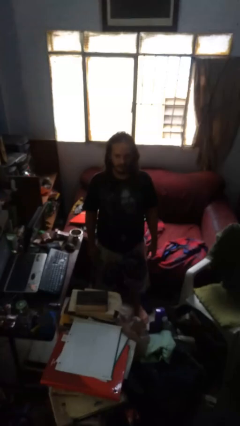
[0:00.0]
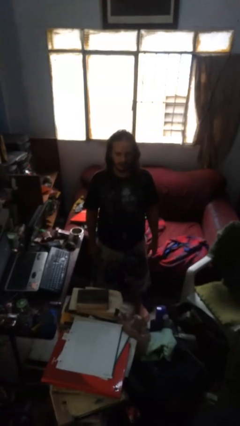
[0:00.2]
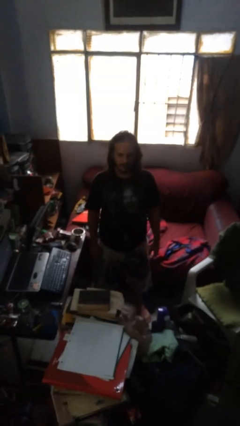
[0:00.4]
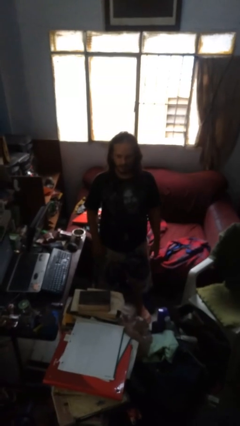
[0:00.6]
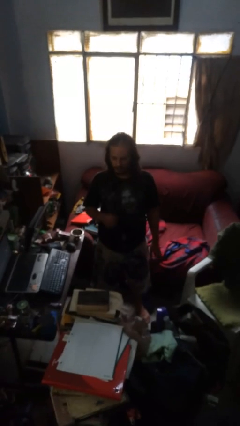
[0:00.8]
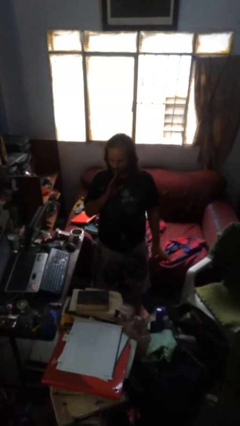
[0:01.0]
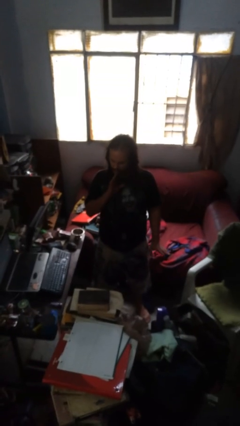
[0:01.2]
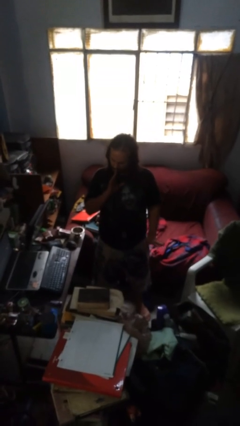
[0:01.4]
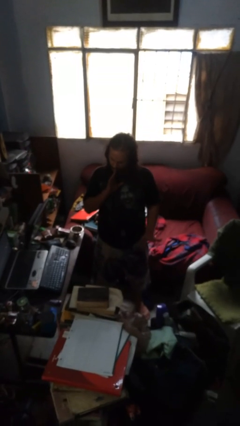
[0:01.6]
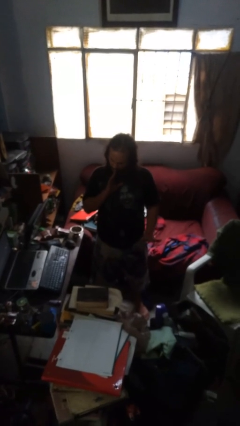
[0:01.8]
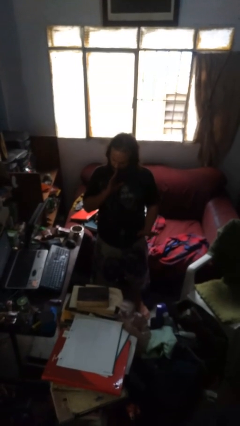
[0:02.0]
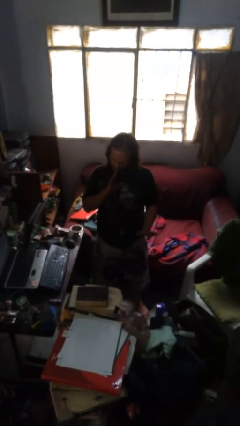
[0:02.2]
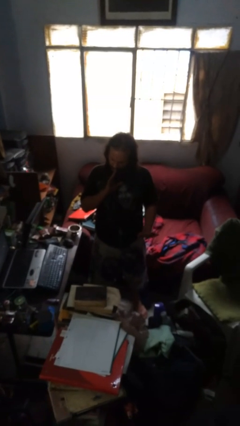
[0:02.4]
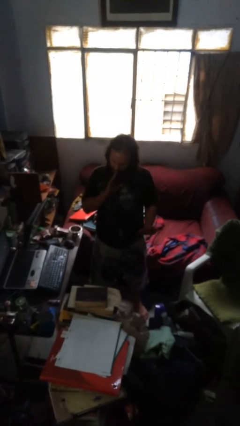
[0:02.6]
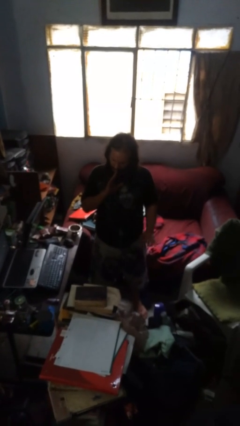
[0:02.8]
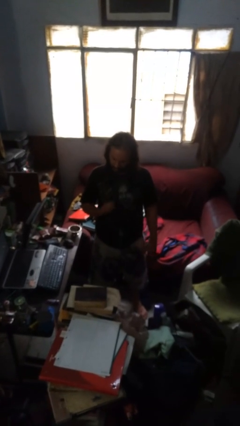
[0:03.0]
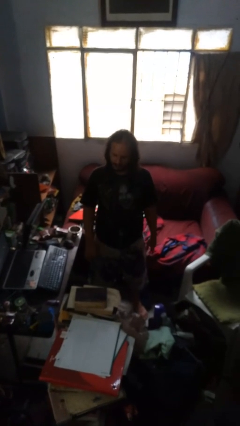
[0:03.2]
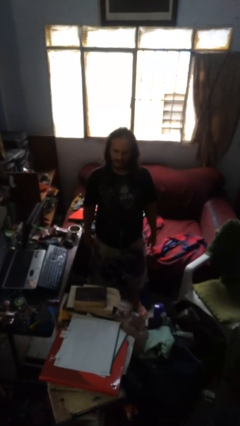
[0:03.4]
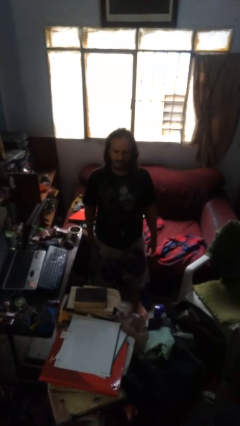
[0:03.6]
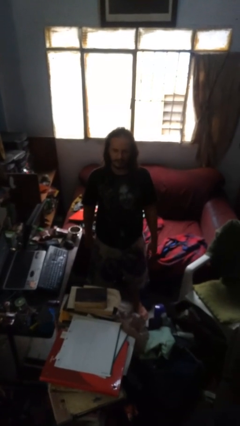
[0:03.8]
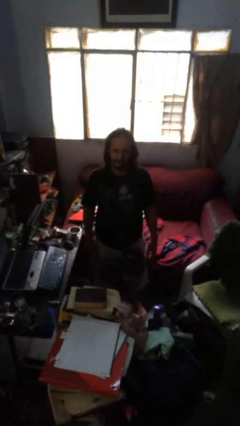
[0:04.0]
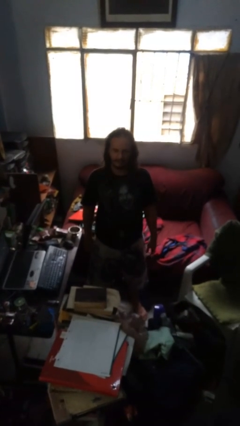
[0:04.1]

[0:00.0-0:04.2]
person gestures be quiet

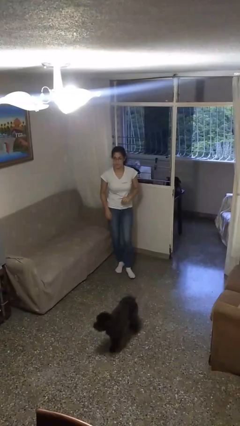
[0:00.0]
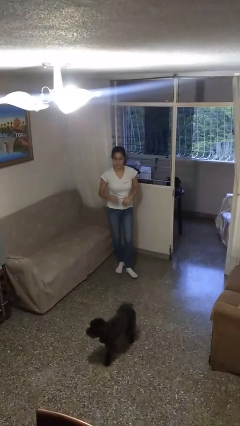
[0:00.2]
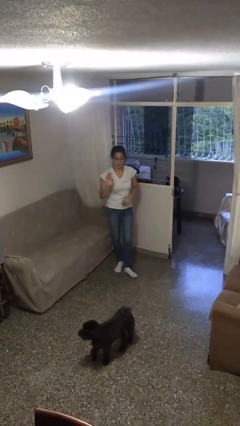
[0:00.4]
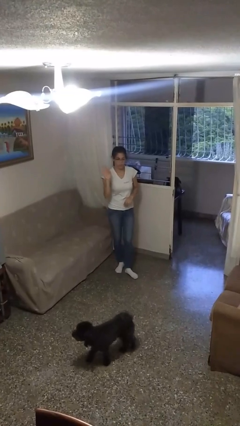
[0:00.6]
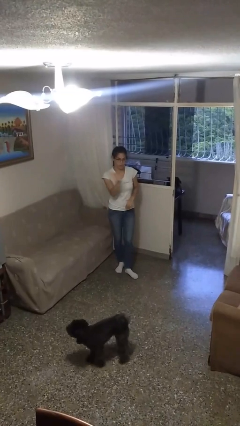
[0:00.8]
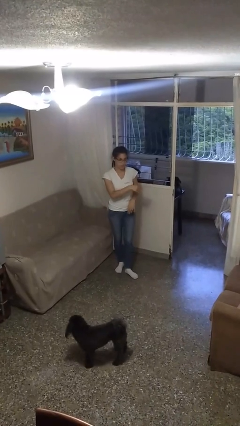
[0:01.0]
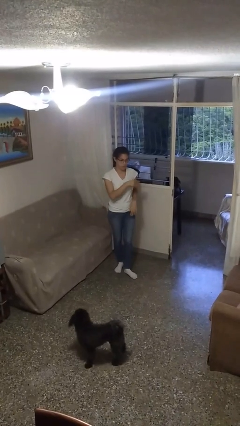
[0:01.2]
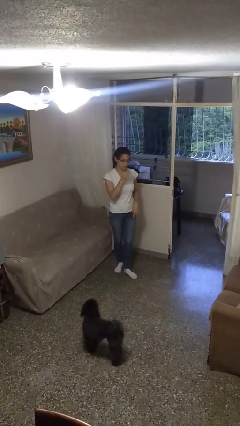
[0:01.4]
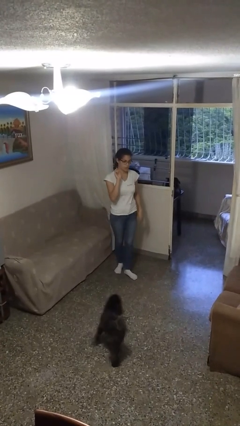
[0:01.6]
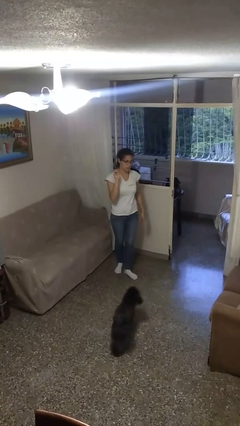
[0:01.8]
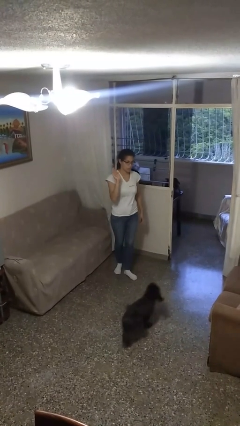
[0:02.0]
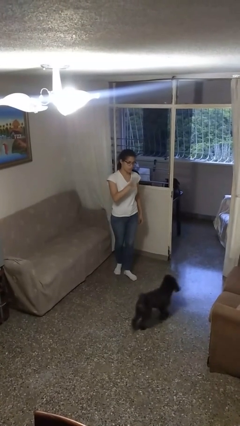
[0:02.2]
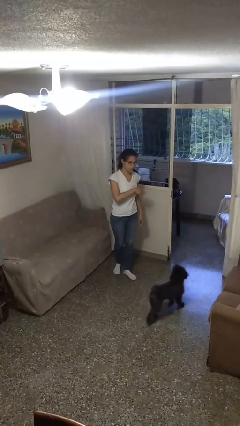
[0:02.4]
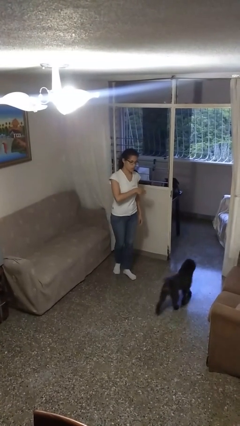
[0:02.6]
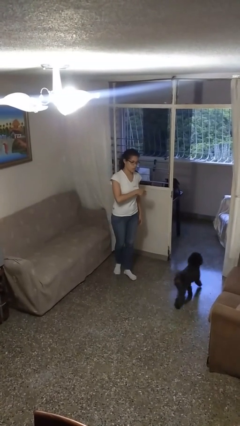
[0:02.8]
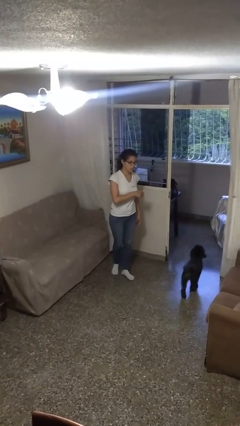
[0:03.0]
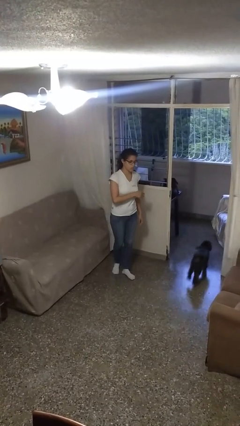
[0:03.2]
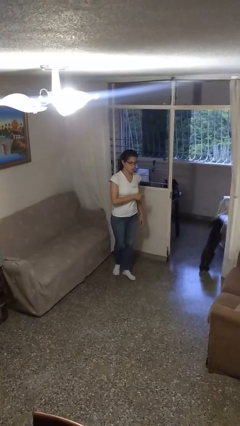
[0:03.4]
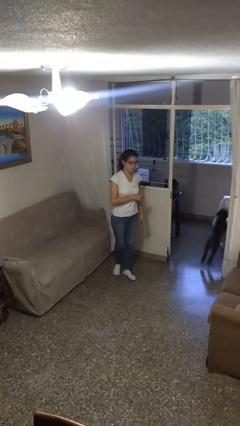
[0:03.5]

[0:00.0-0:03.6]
person gestures swipe left

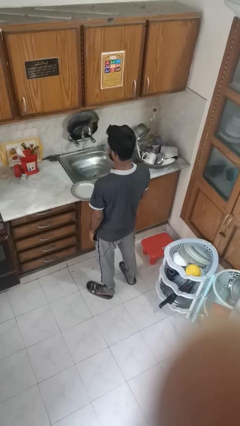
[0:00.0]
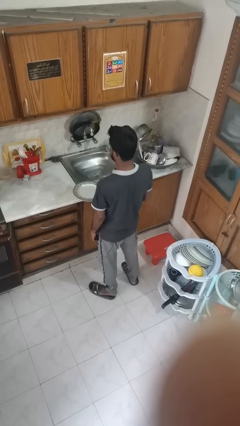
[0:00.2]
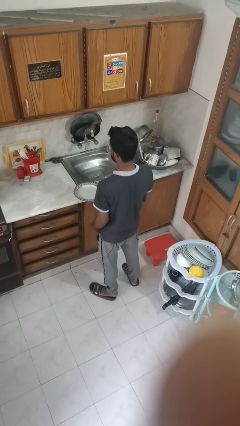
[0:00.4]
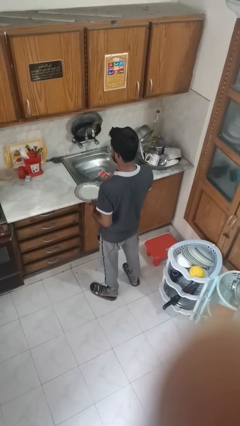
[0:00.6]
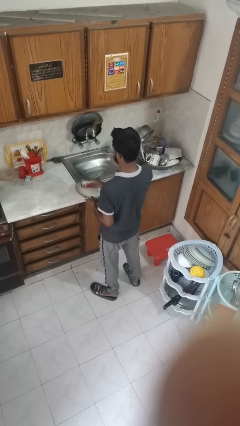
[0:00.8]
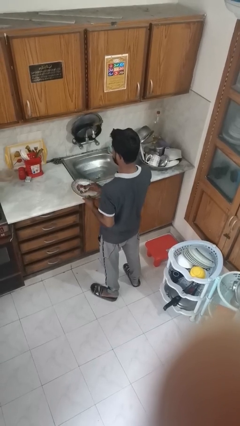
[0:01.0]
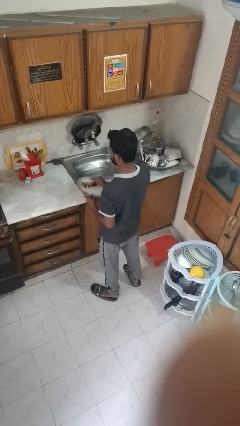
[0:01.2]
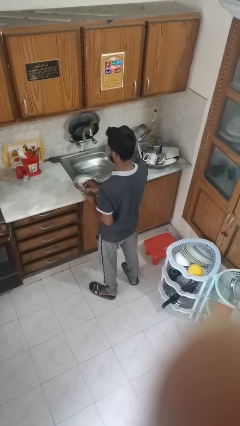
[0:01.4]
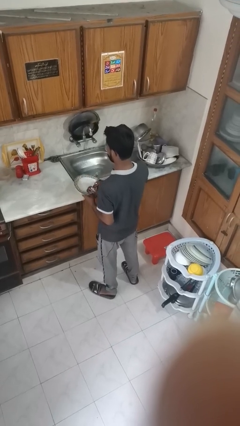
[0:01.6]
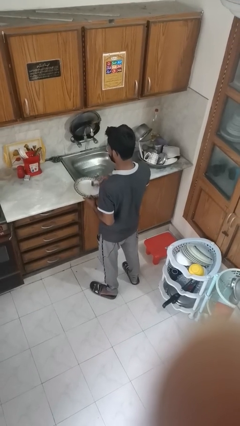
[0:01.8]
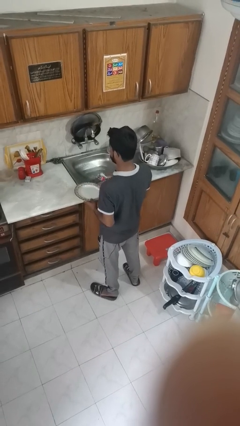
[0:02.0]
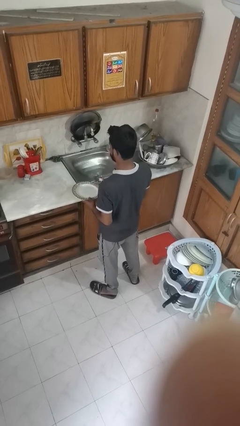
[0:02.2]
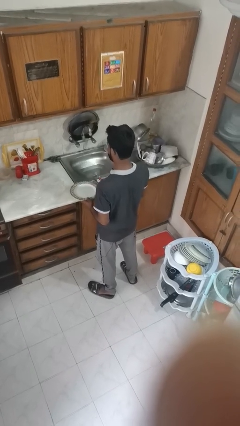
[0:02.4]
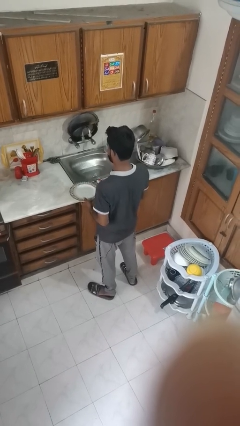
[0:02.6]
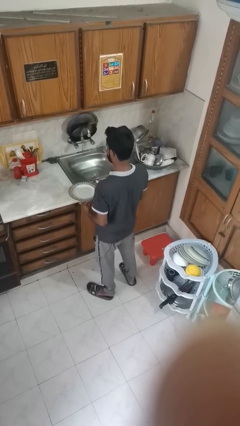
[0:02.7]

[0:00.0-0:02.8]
person dries dish

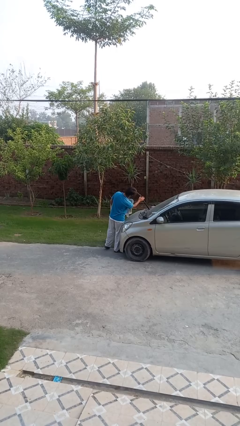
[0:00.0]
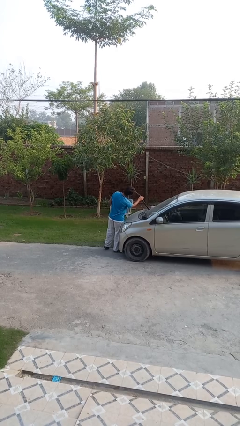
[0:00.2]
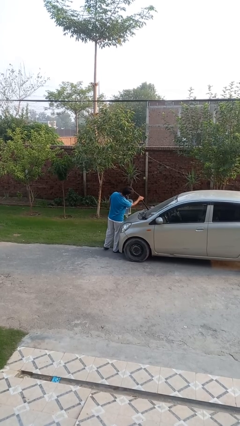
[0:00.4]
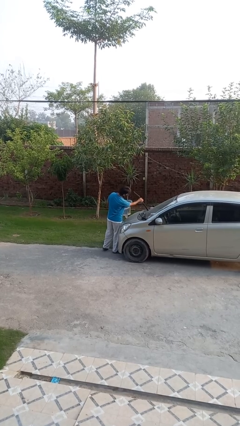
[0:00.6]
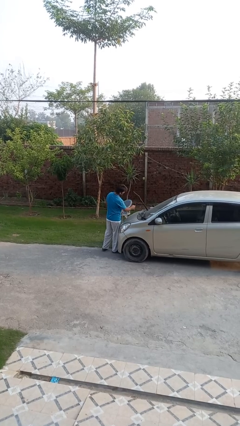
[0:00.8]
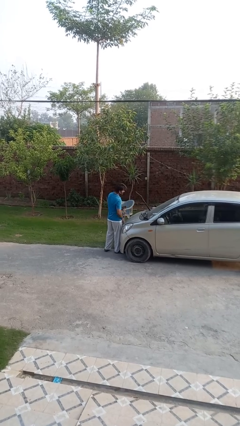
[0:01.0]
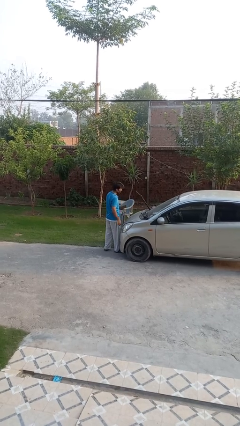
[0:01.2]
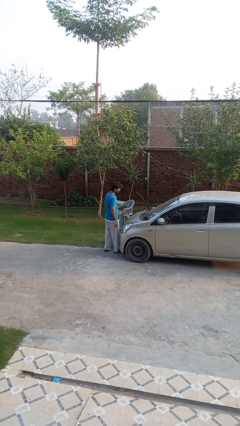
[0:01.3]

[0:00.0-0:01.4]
person flips up car wipers

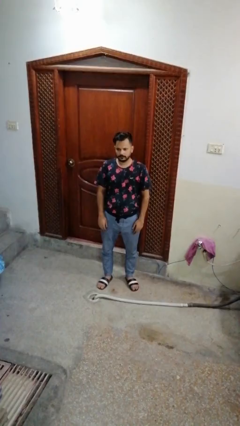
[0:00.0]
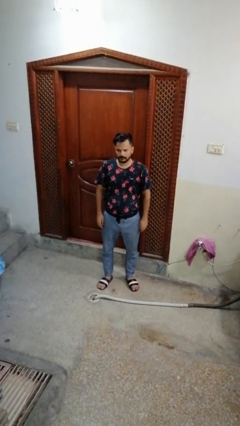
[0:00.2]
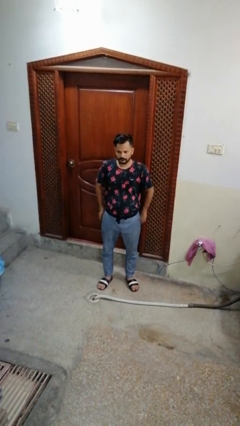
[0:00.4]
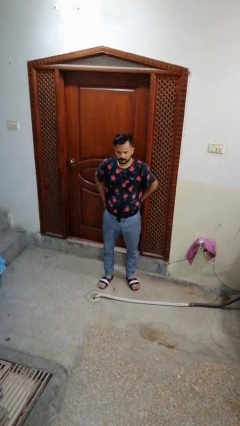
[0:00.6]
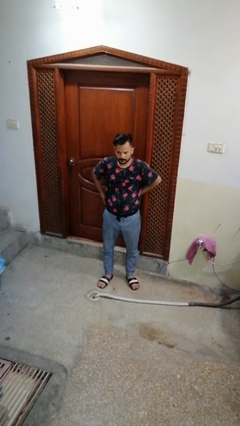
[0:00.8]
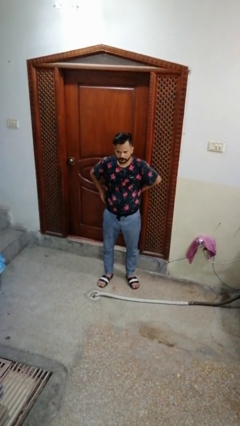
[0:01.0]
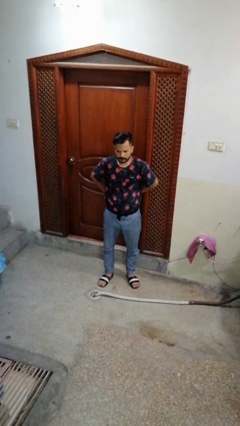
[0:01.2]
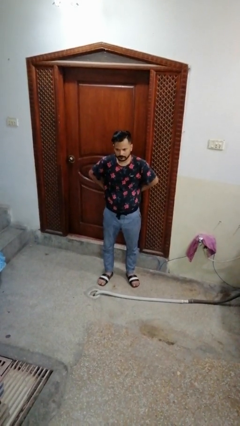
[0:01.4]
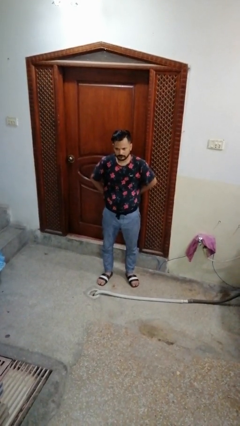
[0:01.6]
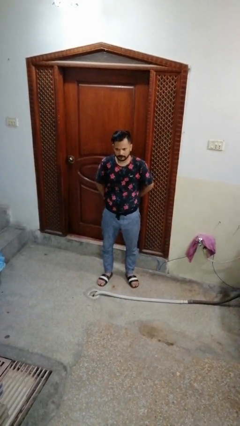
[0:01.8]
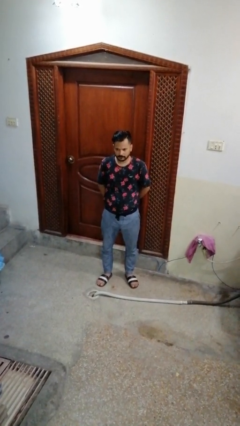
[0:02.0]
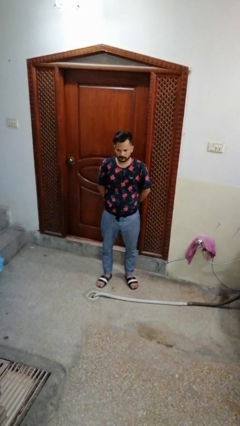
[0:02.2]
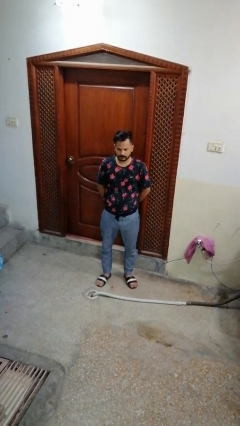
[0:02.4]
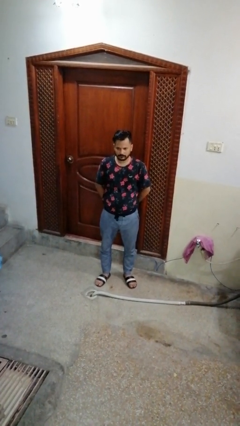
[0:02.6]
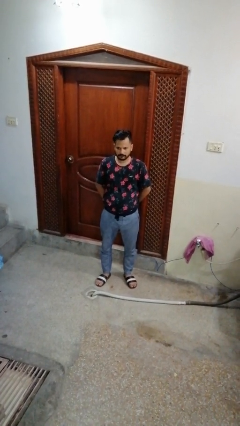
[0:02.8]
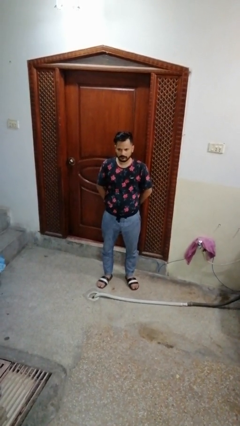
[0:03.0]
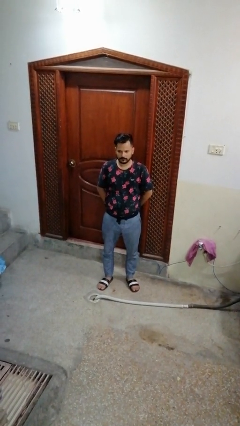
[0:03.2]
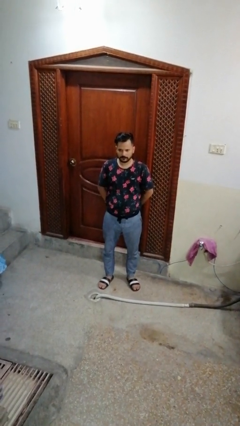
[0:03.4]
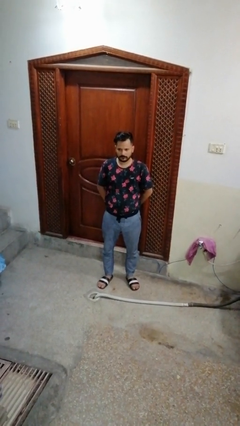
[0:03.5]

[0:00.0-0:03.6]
person puts hands in back pockets

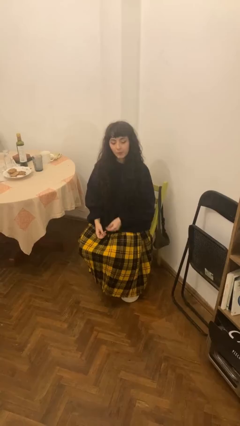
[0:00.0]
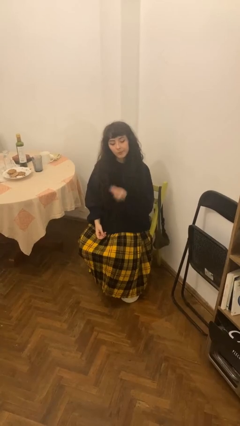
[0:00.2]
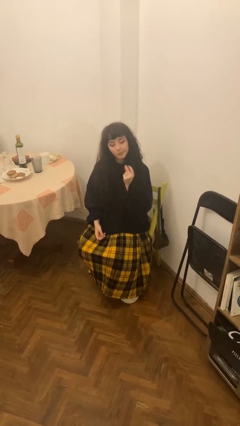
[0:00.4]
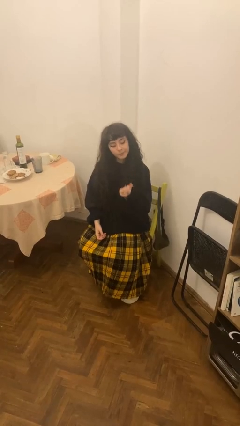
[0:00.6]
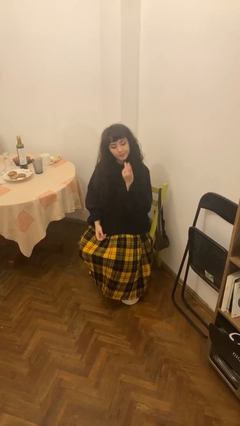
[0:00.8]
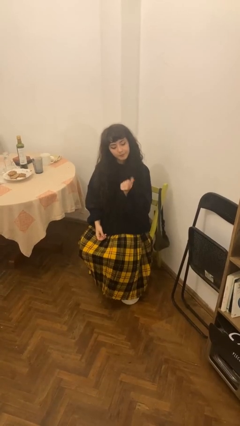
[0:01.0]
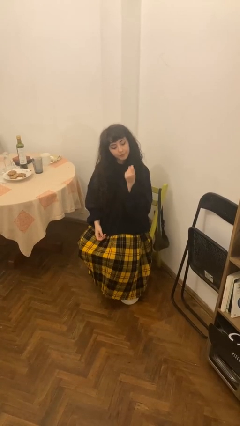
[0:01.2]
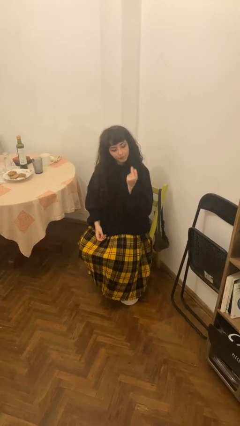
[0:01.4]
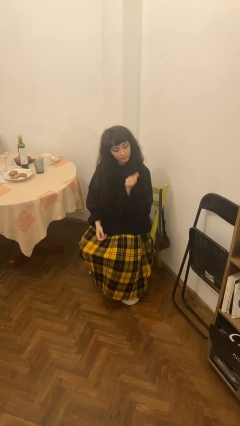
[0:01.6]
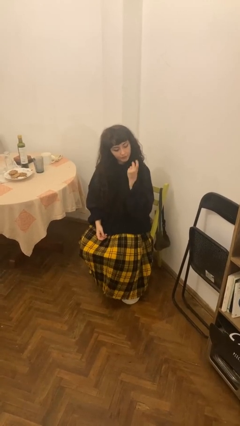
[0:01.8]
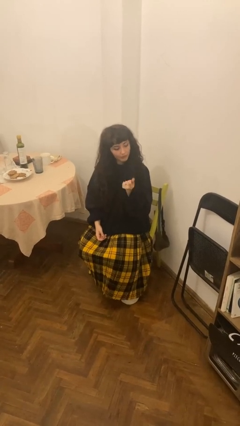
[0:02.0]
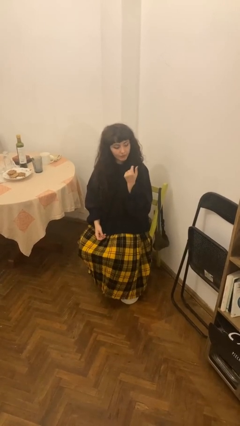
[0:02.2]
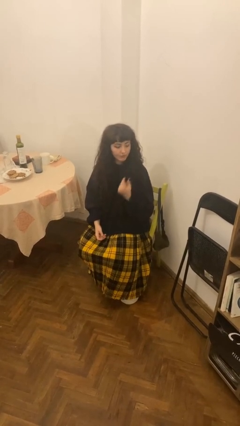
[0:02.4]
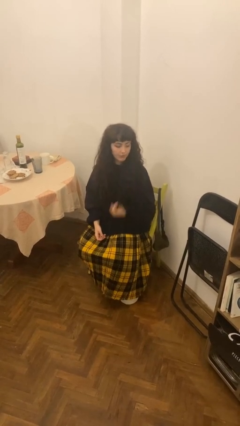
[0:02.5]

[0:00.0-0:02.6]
person snaps fingers
